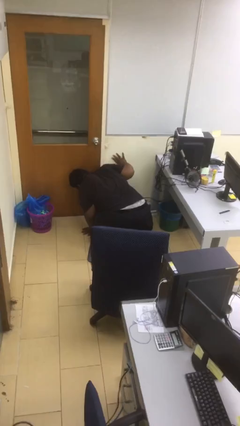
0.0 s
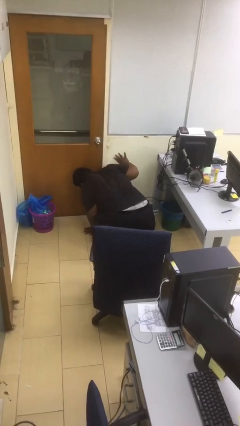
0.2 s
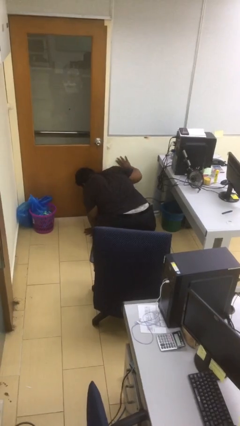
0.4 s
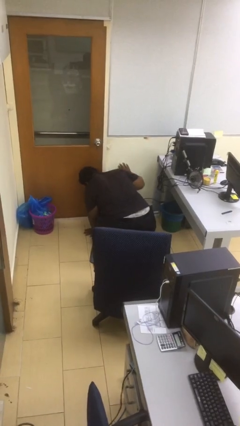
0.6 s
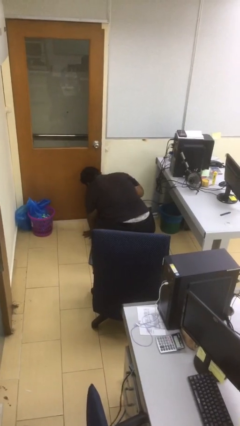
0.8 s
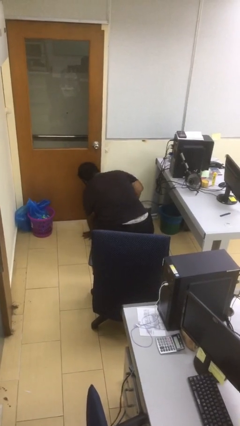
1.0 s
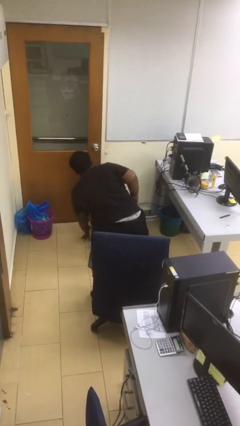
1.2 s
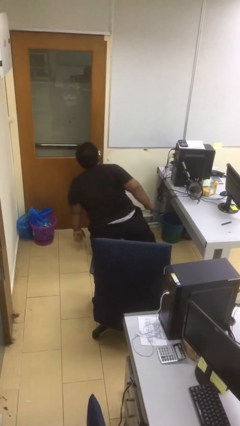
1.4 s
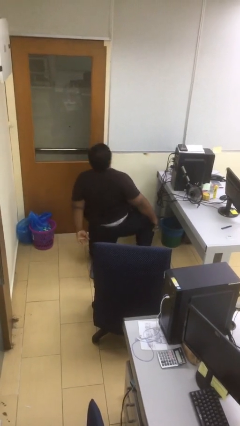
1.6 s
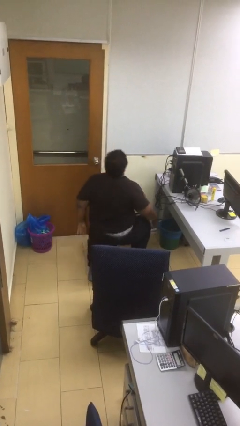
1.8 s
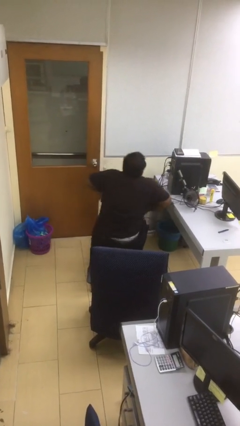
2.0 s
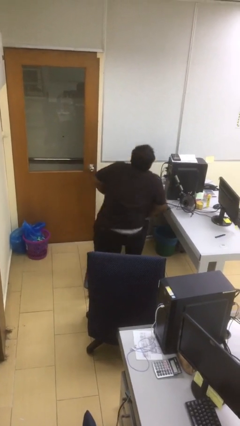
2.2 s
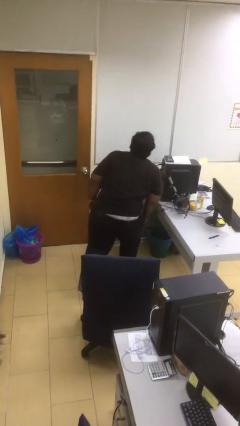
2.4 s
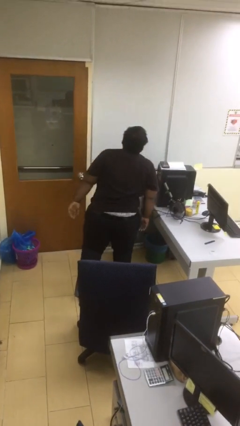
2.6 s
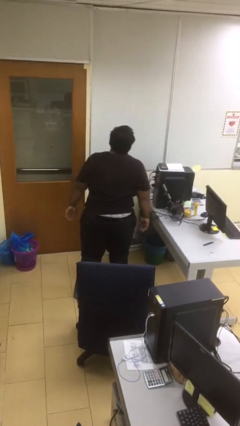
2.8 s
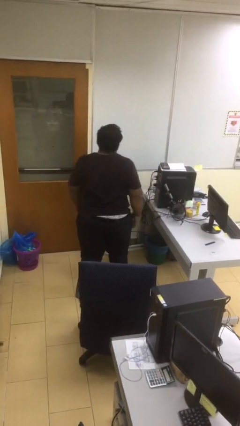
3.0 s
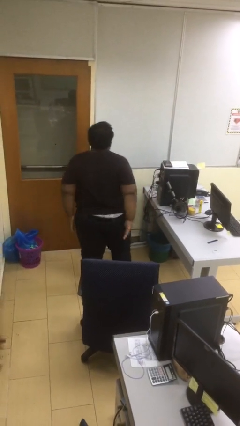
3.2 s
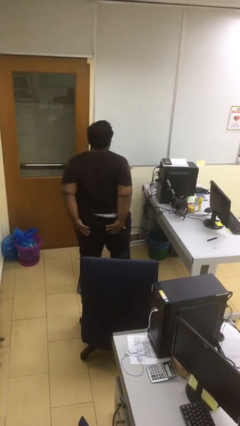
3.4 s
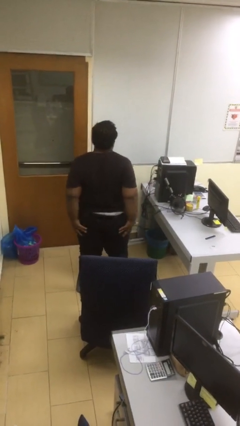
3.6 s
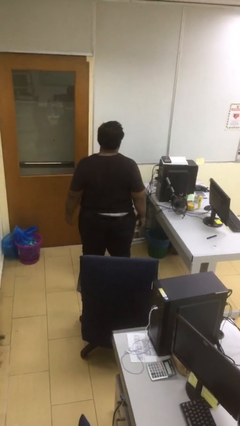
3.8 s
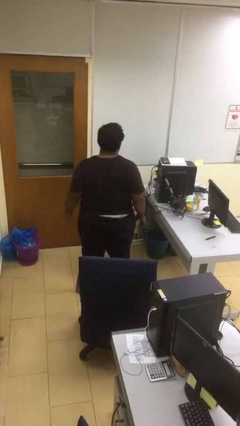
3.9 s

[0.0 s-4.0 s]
person stands up from floor

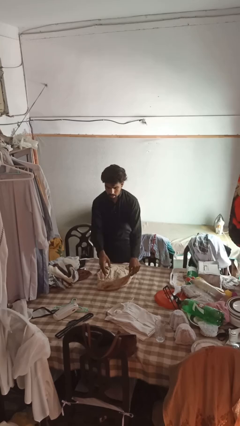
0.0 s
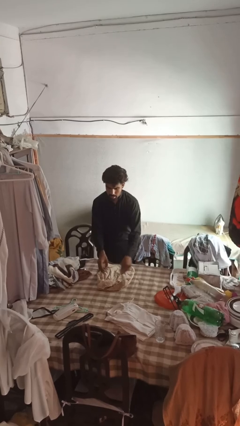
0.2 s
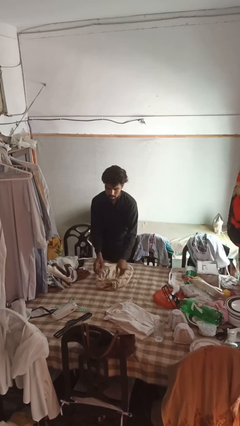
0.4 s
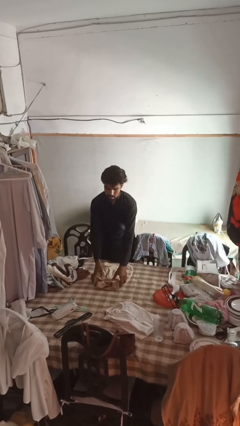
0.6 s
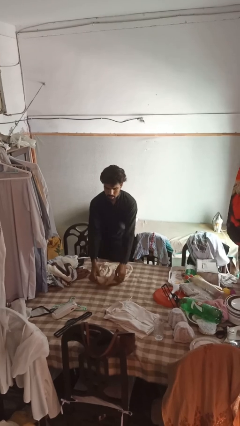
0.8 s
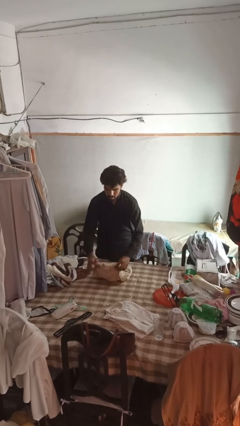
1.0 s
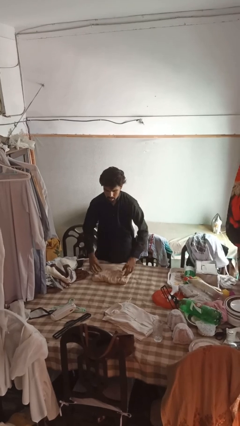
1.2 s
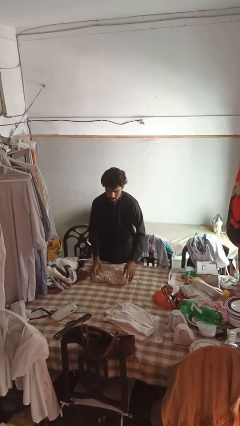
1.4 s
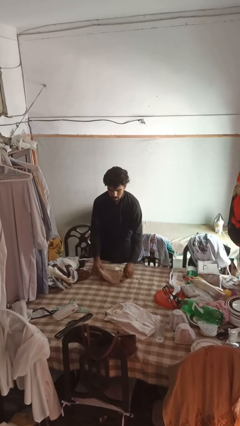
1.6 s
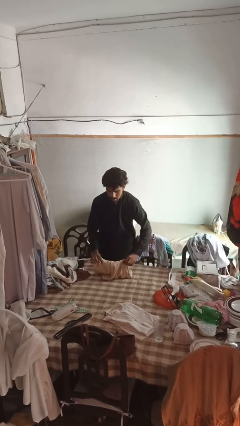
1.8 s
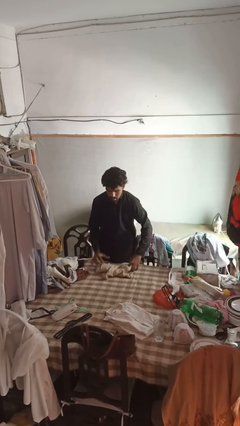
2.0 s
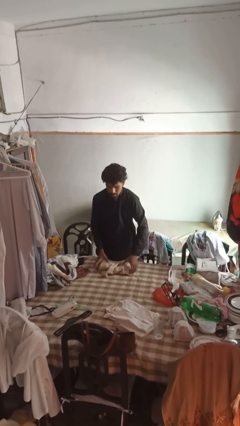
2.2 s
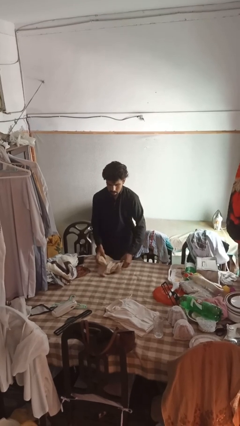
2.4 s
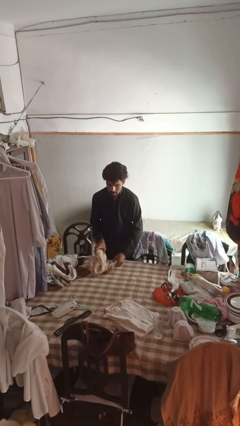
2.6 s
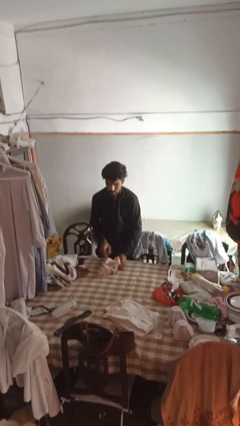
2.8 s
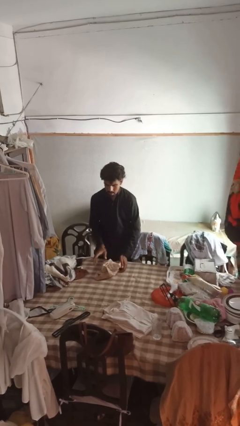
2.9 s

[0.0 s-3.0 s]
person folds shirt

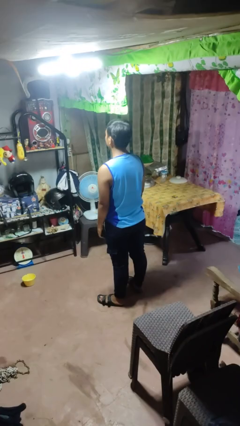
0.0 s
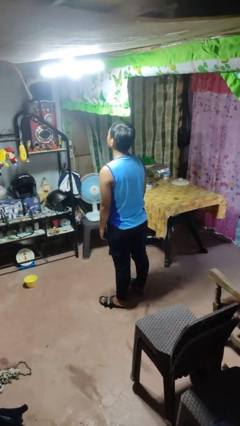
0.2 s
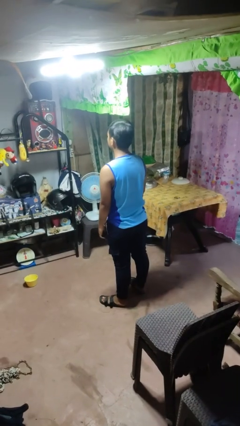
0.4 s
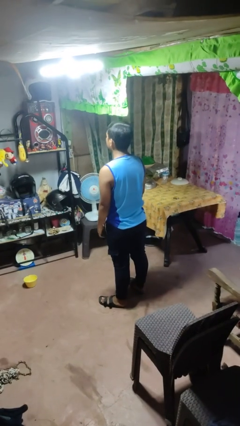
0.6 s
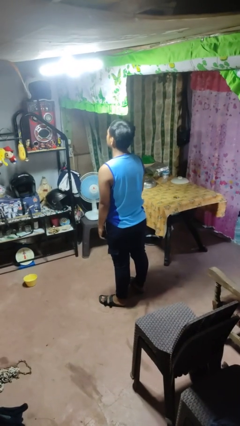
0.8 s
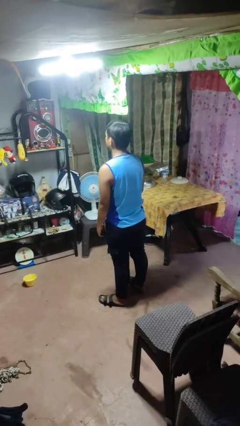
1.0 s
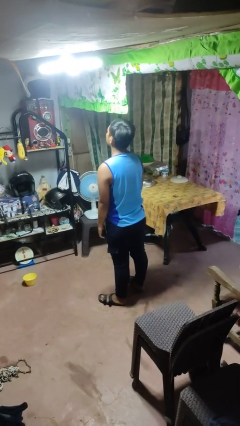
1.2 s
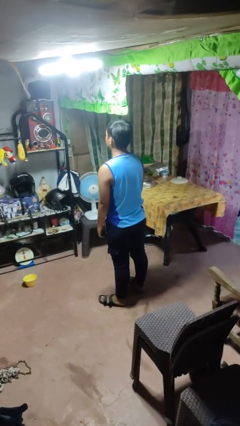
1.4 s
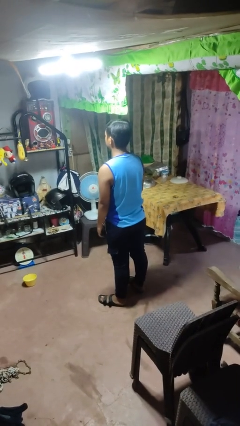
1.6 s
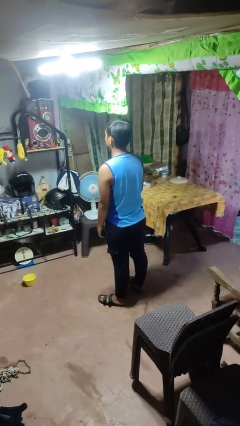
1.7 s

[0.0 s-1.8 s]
person nods head

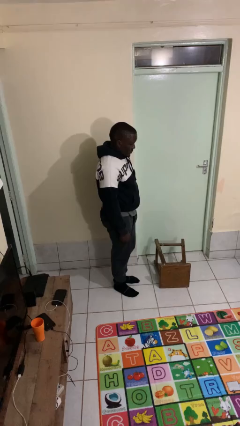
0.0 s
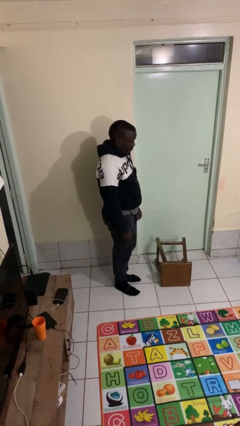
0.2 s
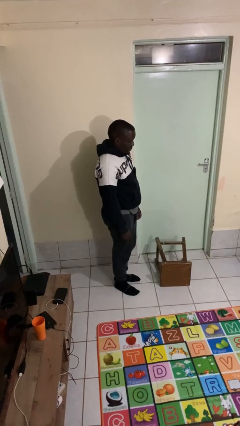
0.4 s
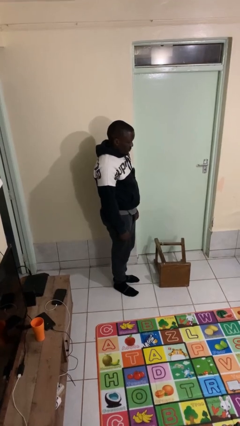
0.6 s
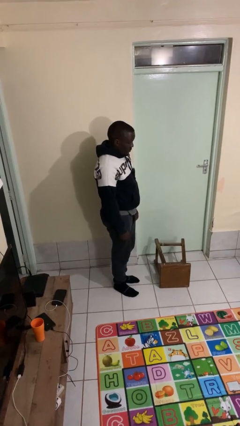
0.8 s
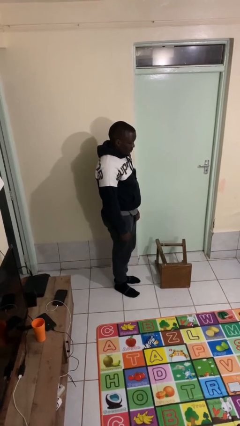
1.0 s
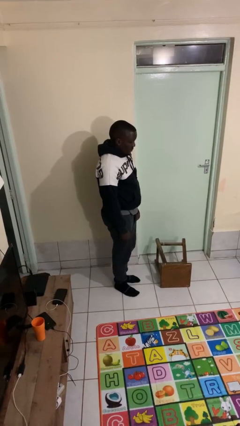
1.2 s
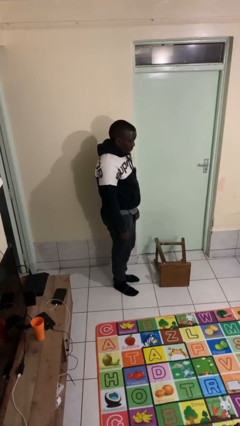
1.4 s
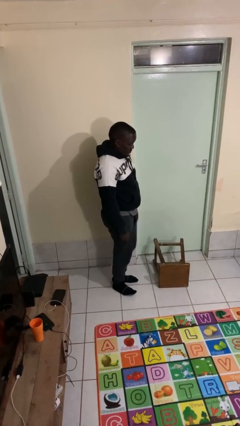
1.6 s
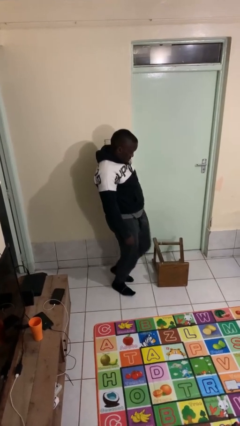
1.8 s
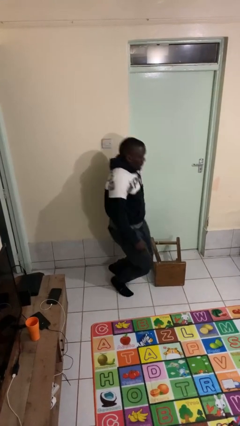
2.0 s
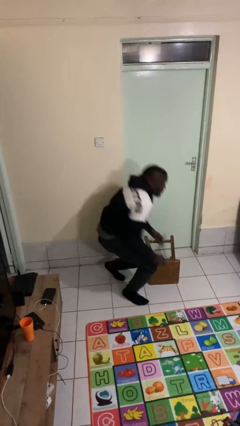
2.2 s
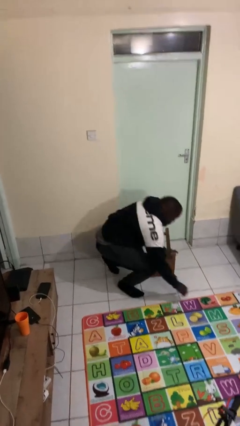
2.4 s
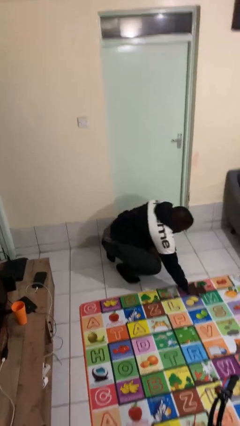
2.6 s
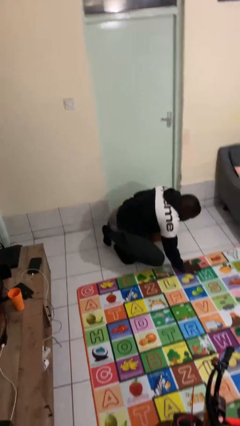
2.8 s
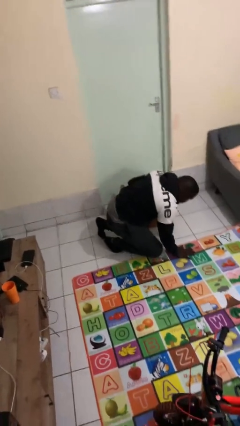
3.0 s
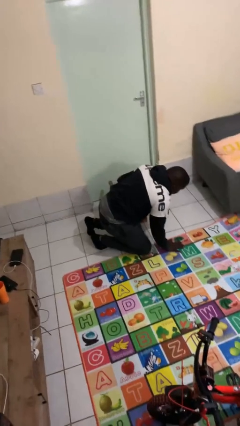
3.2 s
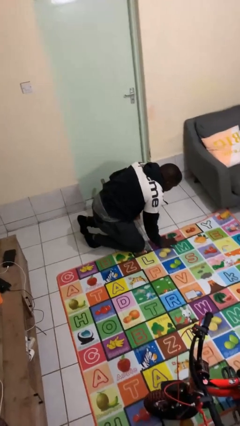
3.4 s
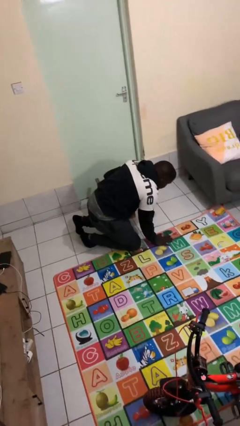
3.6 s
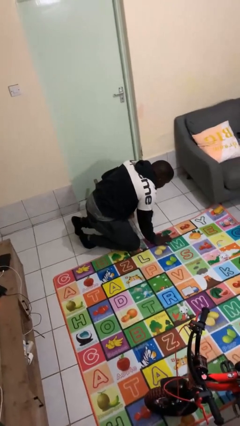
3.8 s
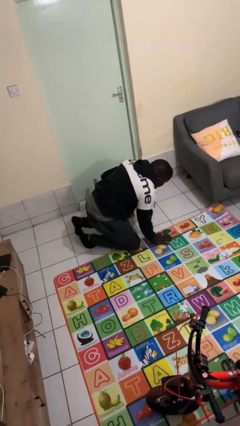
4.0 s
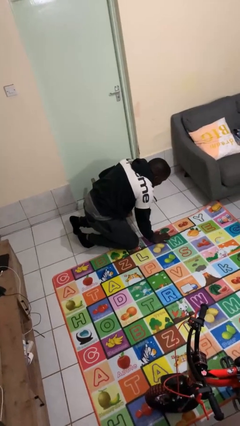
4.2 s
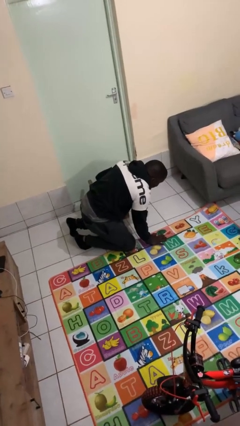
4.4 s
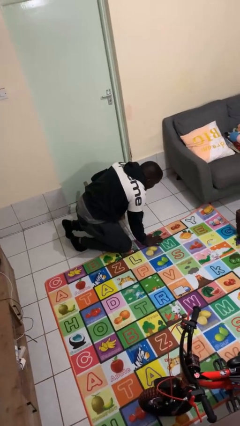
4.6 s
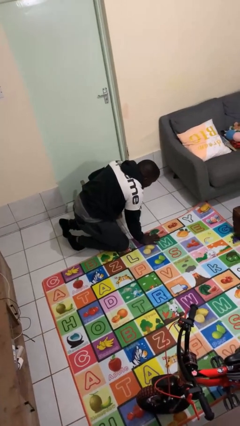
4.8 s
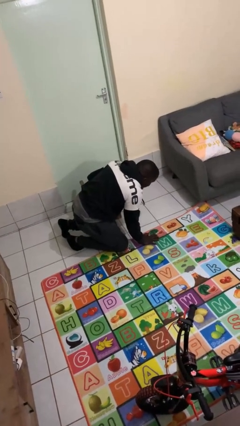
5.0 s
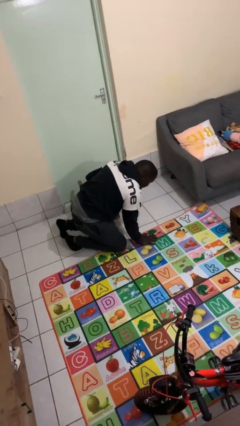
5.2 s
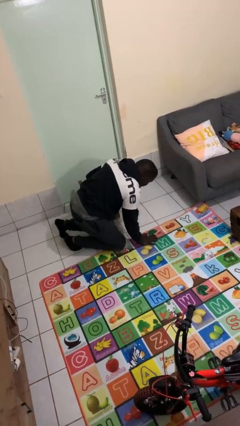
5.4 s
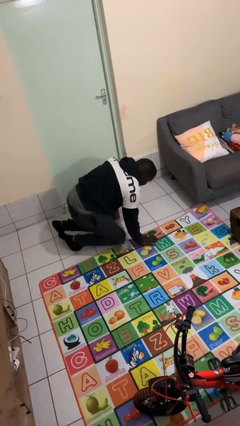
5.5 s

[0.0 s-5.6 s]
person trips on object on floor

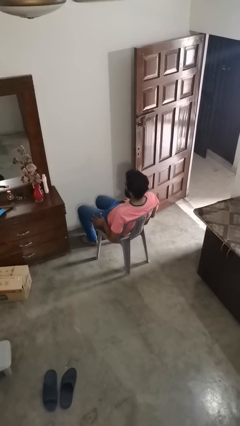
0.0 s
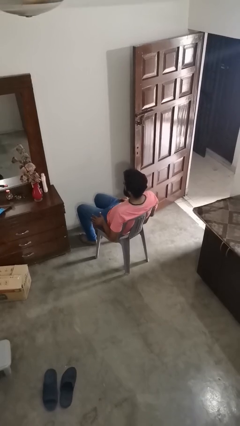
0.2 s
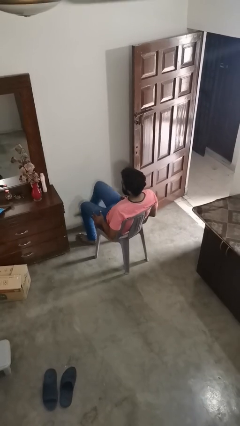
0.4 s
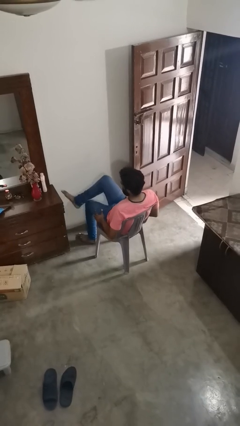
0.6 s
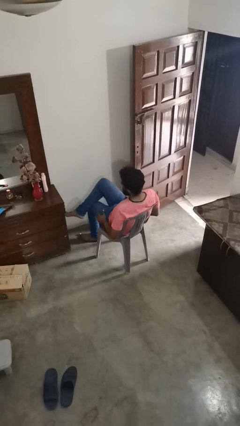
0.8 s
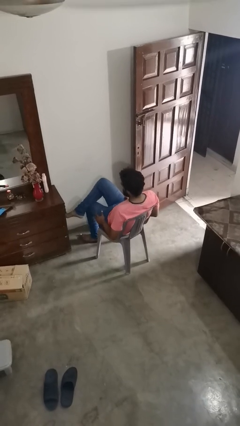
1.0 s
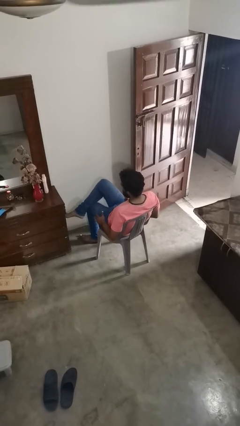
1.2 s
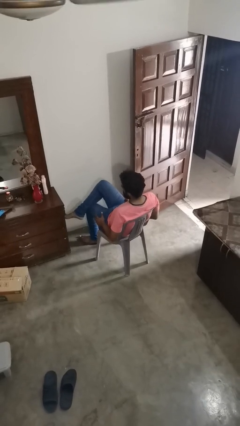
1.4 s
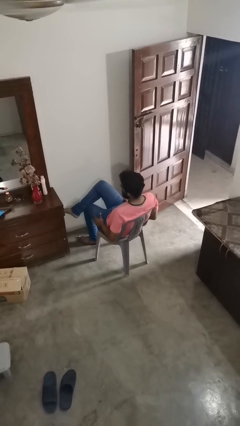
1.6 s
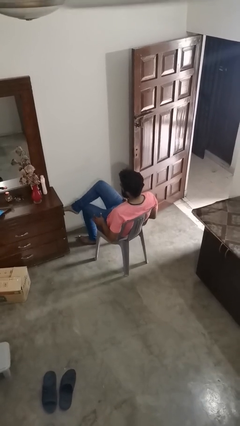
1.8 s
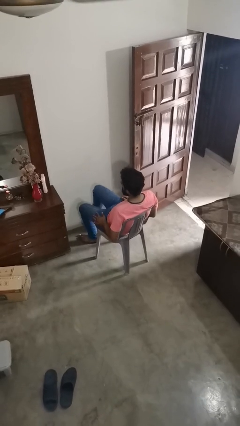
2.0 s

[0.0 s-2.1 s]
person crosses legs

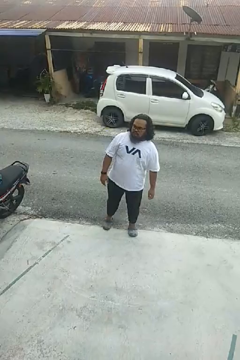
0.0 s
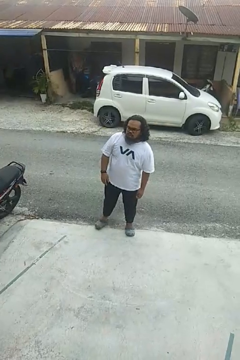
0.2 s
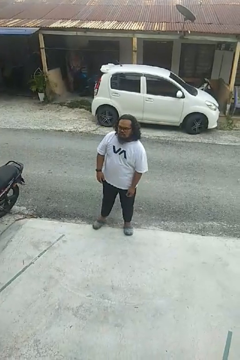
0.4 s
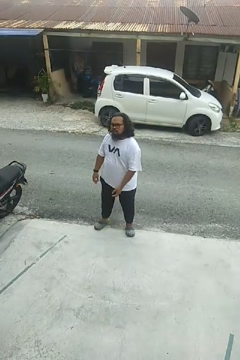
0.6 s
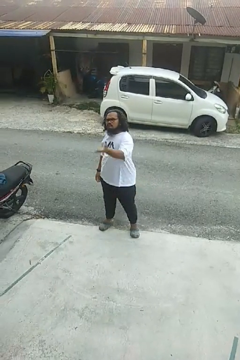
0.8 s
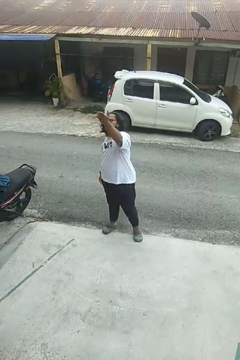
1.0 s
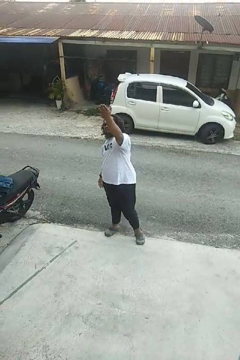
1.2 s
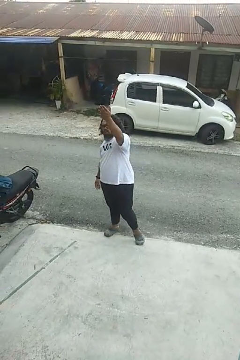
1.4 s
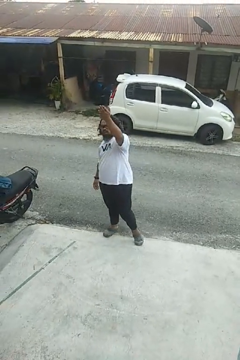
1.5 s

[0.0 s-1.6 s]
person gestures swipe up
